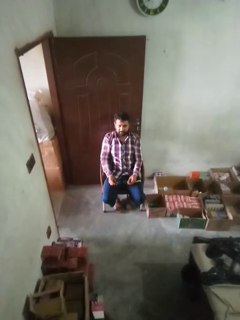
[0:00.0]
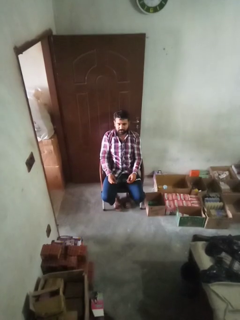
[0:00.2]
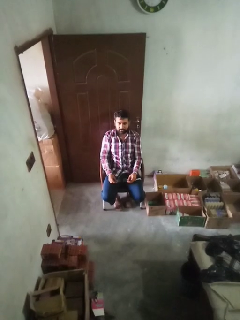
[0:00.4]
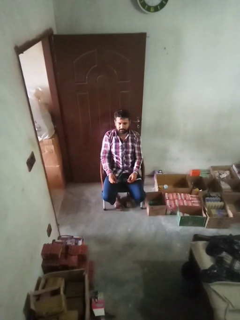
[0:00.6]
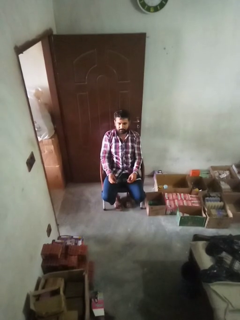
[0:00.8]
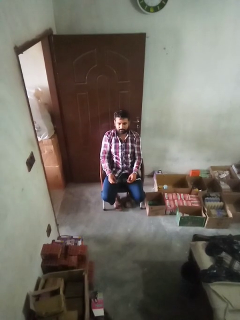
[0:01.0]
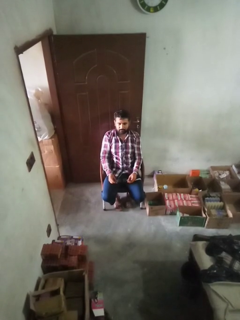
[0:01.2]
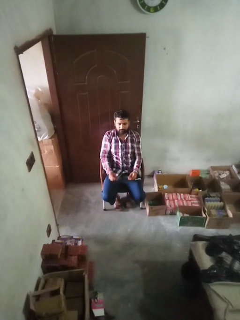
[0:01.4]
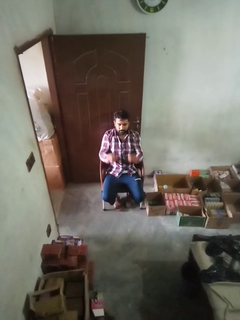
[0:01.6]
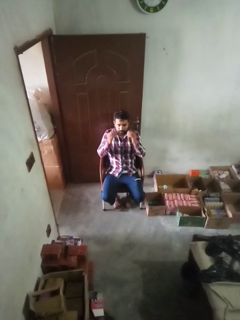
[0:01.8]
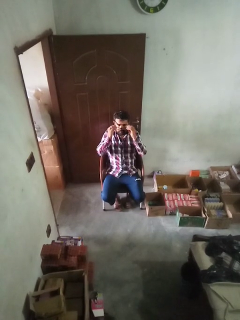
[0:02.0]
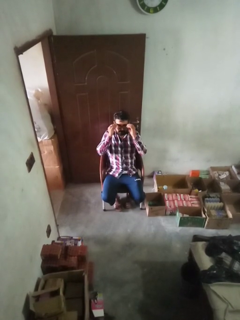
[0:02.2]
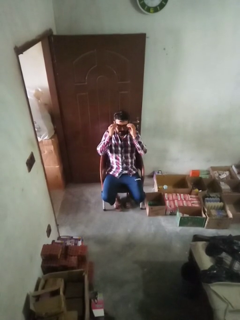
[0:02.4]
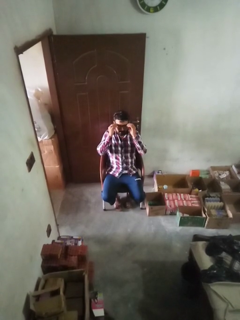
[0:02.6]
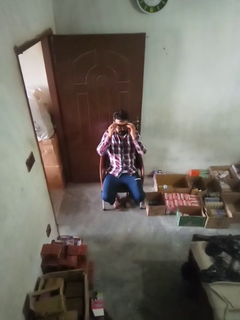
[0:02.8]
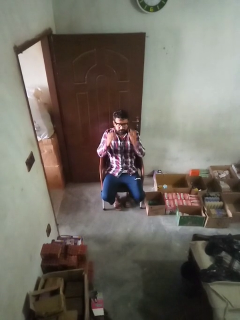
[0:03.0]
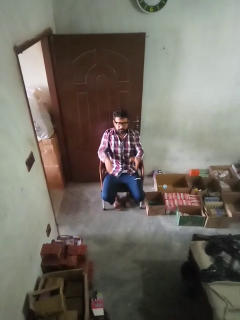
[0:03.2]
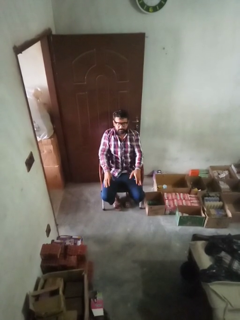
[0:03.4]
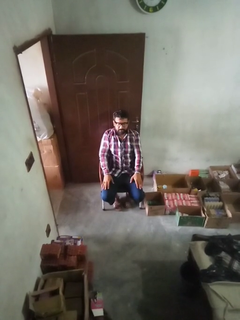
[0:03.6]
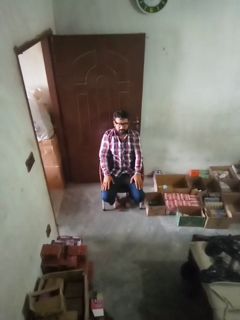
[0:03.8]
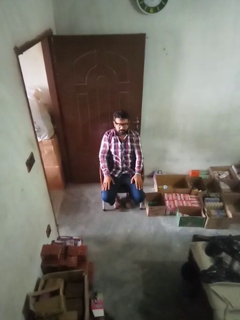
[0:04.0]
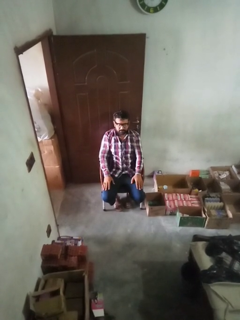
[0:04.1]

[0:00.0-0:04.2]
person puts on glasses

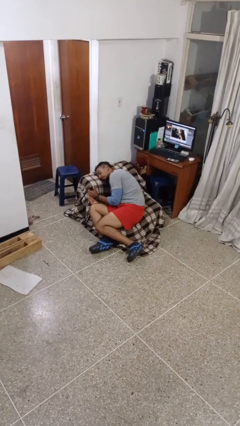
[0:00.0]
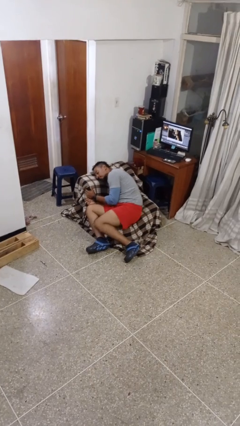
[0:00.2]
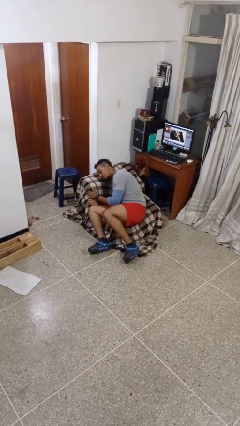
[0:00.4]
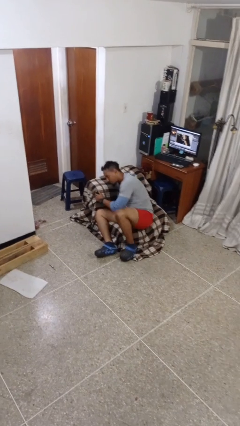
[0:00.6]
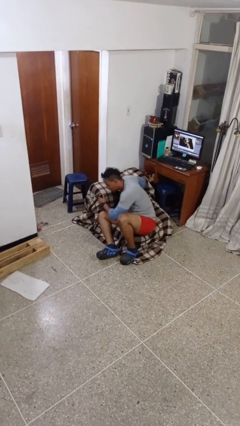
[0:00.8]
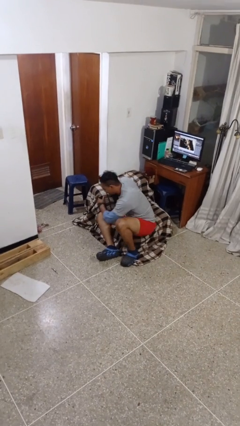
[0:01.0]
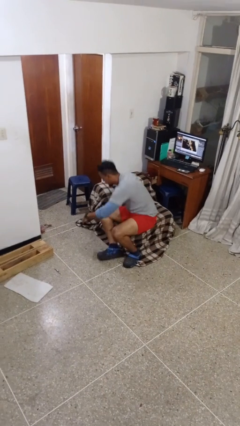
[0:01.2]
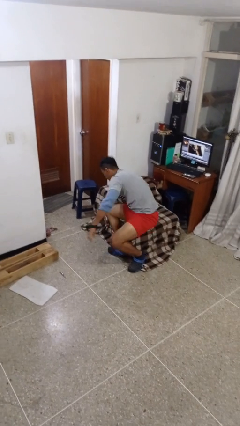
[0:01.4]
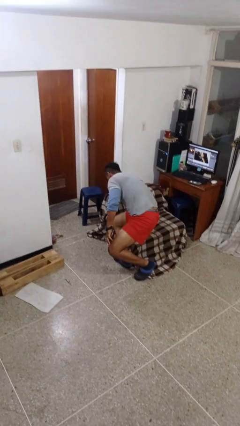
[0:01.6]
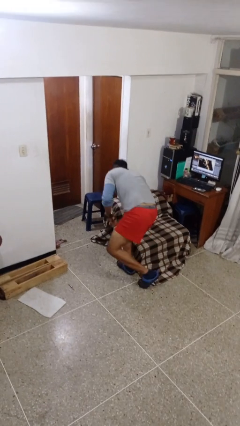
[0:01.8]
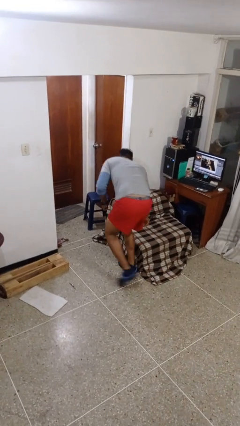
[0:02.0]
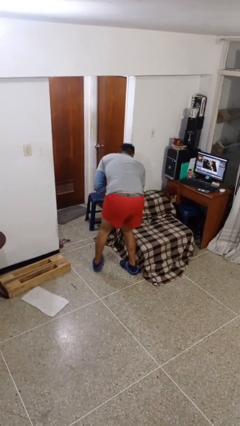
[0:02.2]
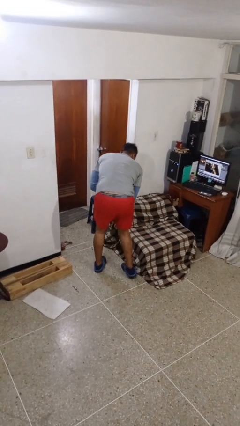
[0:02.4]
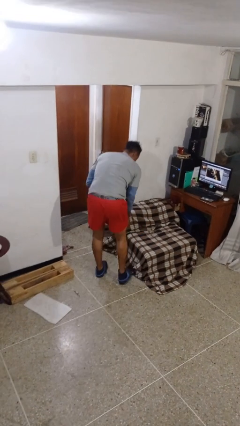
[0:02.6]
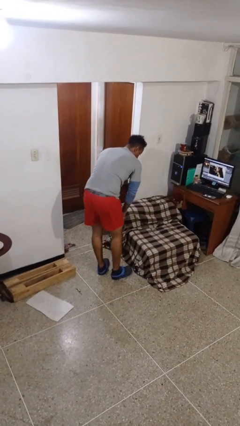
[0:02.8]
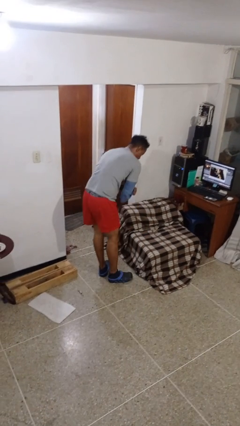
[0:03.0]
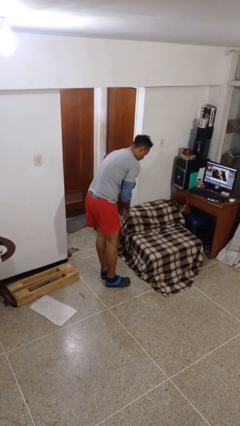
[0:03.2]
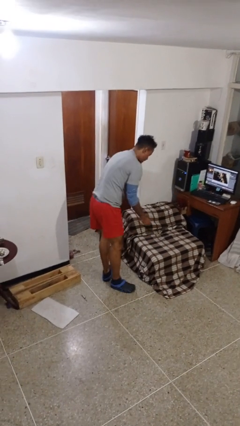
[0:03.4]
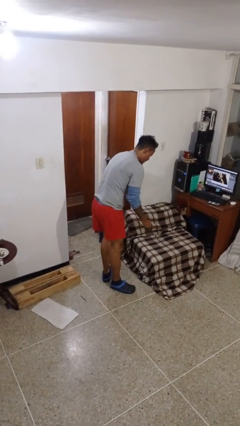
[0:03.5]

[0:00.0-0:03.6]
person stands up

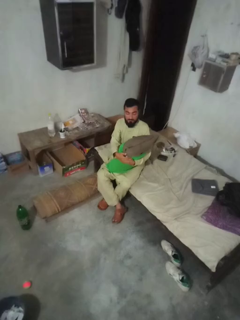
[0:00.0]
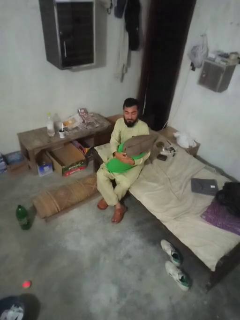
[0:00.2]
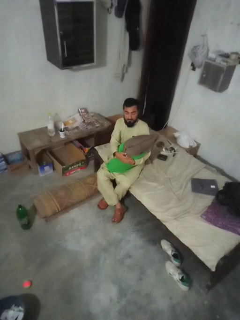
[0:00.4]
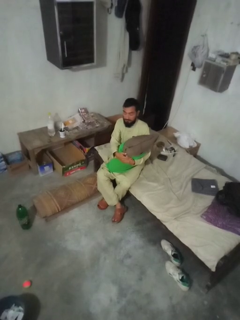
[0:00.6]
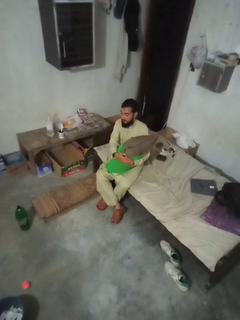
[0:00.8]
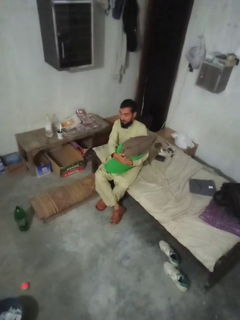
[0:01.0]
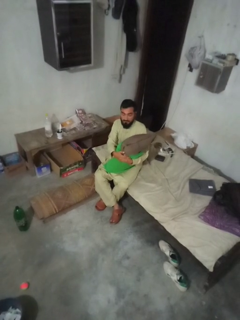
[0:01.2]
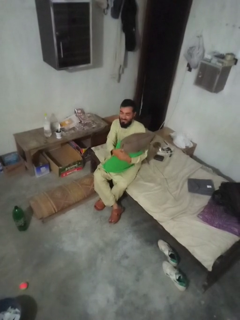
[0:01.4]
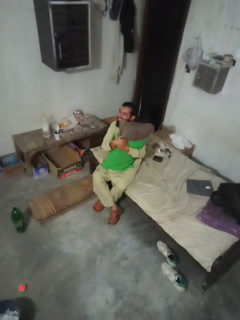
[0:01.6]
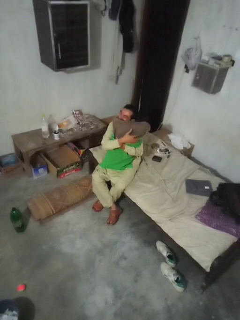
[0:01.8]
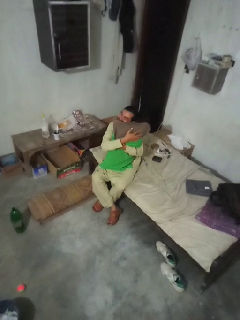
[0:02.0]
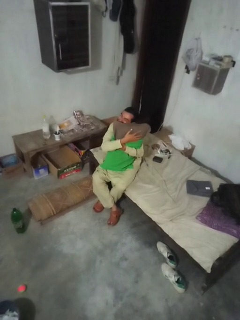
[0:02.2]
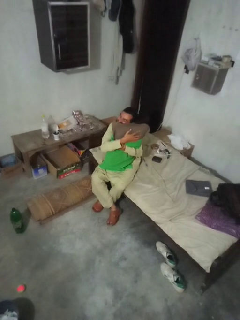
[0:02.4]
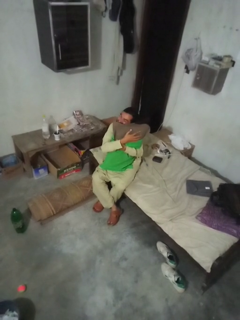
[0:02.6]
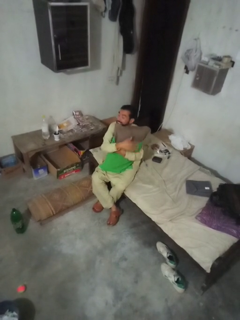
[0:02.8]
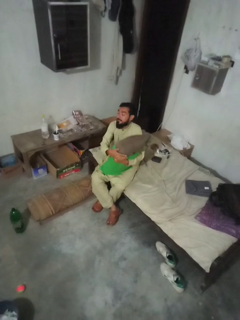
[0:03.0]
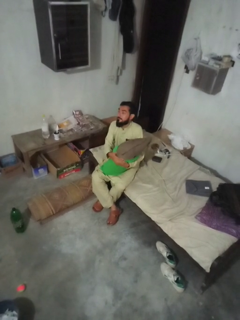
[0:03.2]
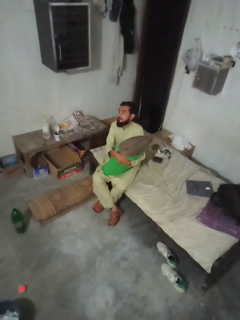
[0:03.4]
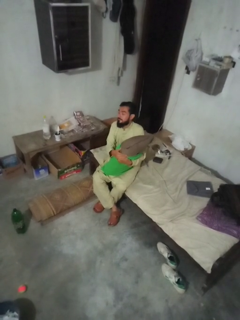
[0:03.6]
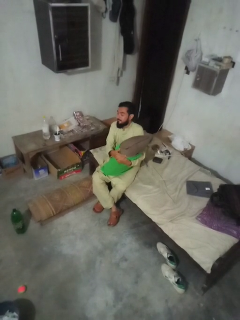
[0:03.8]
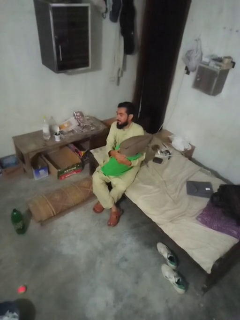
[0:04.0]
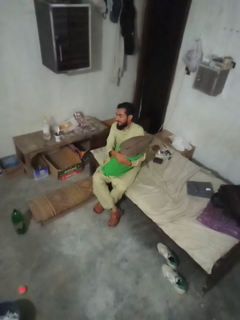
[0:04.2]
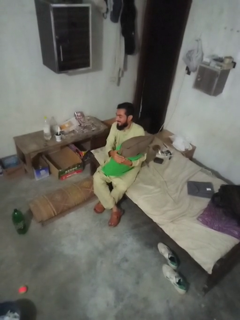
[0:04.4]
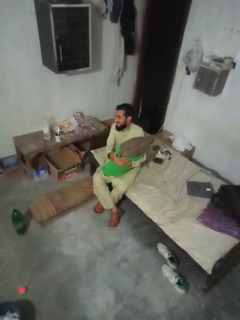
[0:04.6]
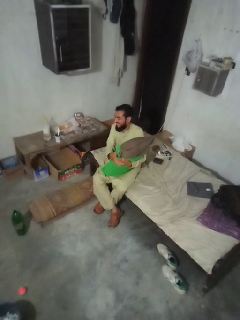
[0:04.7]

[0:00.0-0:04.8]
person hugs stuffed animal

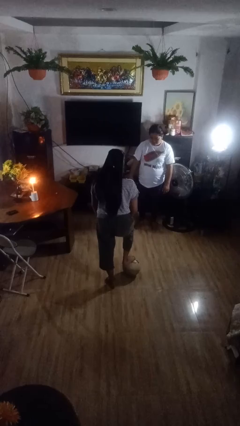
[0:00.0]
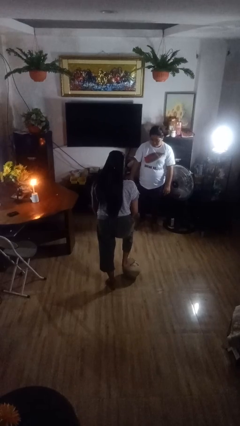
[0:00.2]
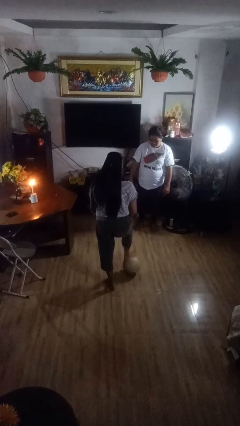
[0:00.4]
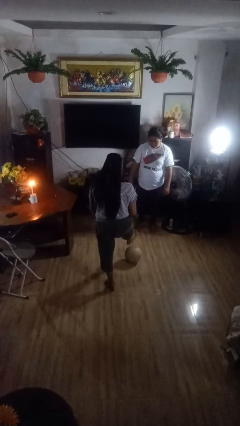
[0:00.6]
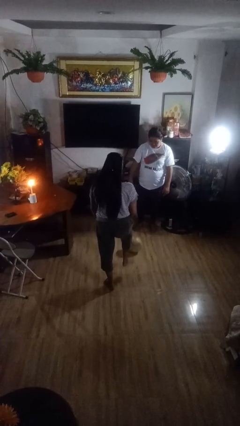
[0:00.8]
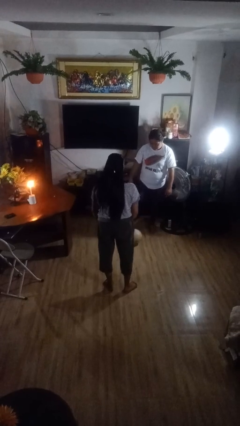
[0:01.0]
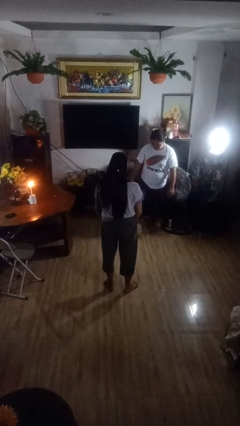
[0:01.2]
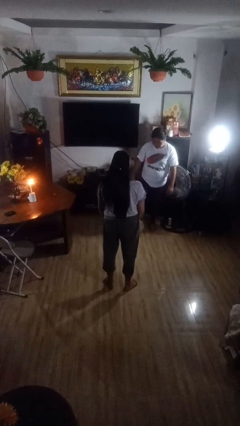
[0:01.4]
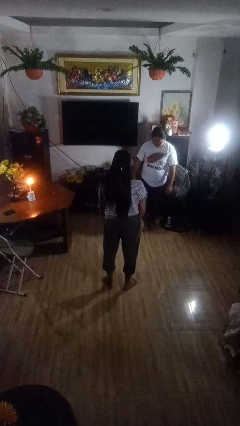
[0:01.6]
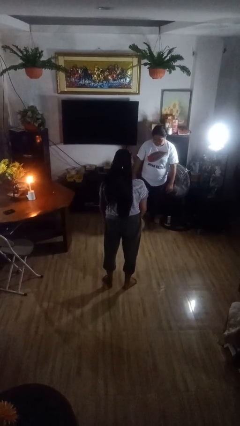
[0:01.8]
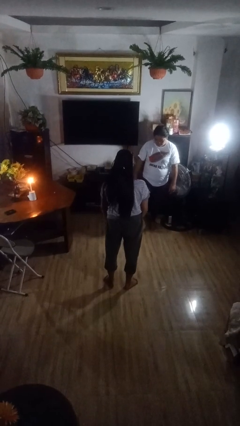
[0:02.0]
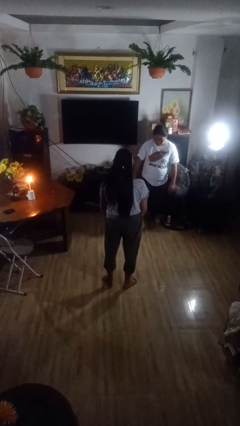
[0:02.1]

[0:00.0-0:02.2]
person kicks object to person

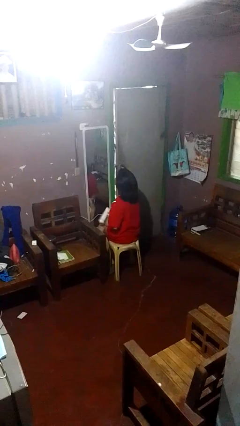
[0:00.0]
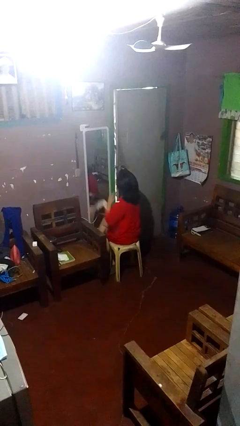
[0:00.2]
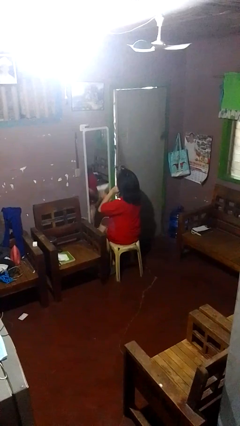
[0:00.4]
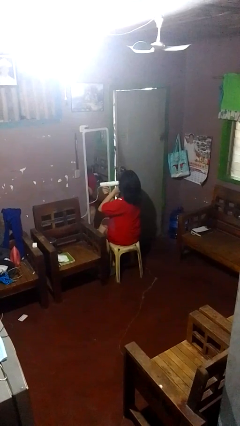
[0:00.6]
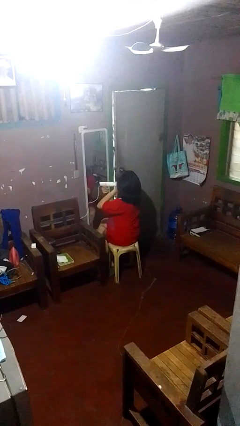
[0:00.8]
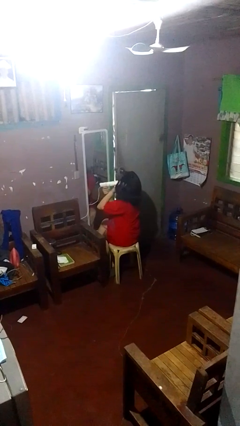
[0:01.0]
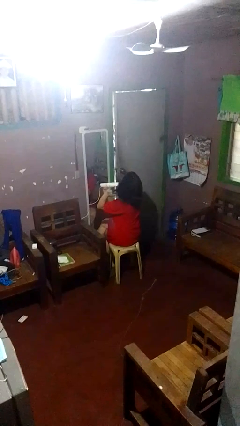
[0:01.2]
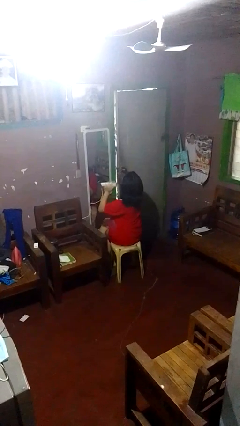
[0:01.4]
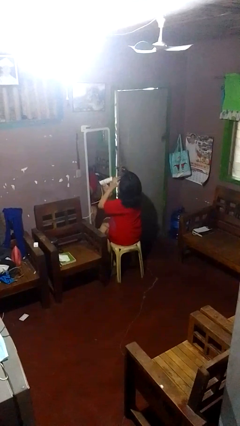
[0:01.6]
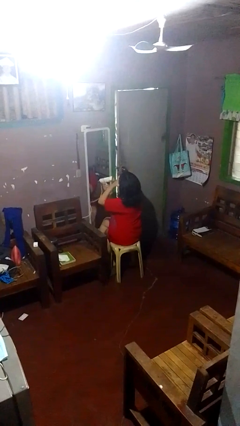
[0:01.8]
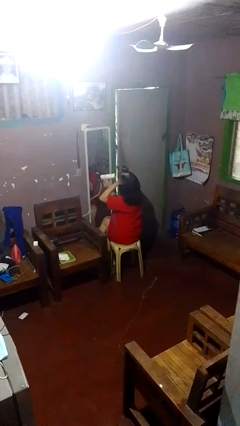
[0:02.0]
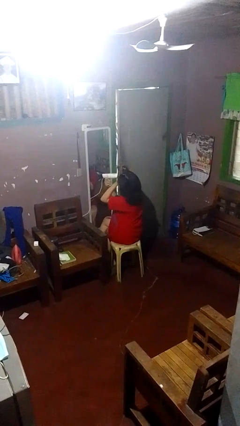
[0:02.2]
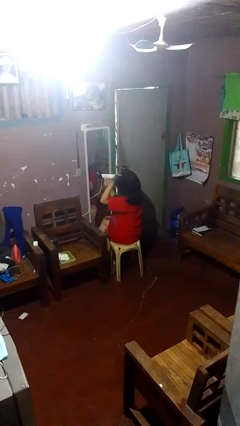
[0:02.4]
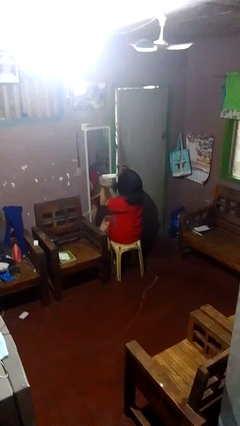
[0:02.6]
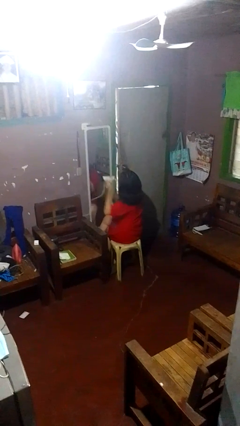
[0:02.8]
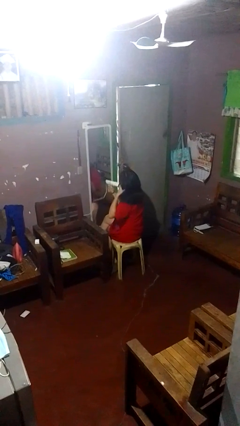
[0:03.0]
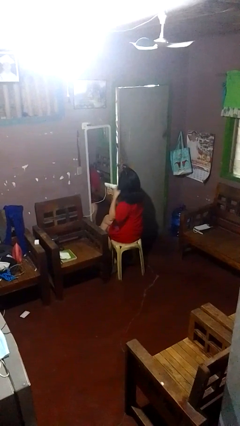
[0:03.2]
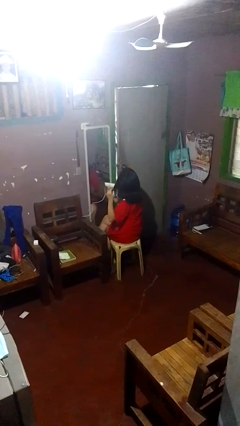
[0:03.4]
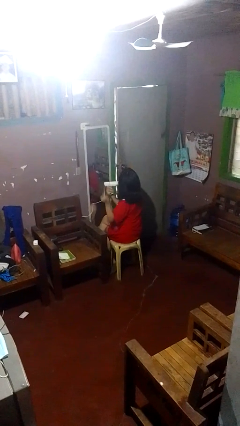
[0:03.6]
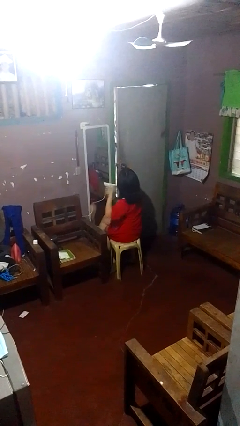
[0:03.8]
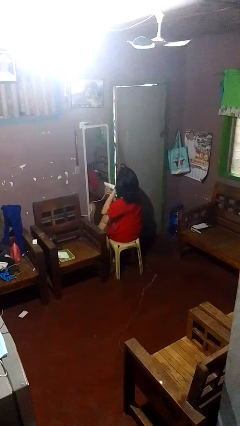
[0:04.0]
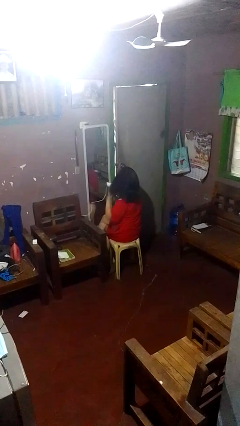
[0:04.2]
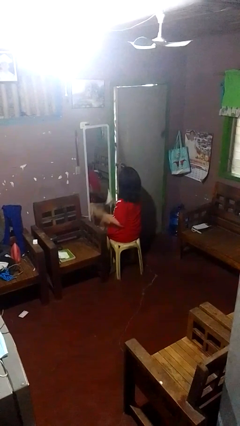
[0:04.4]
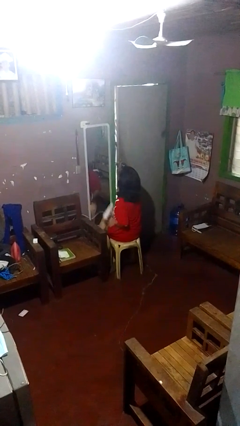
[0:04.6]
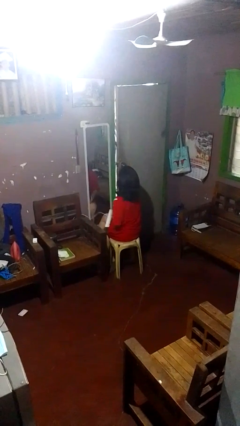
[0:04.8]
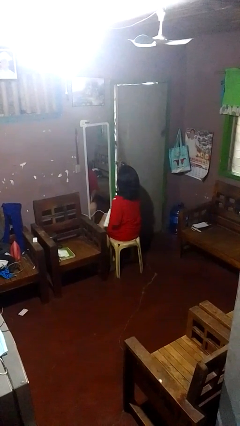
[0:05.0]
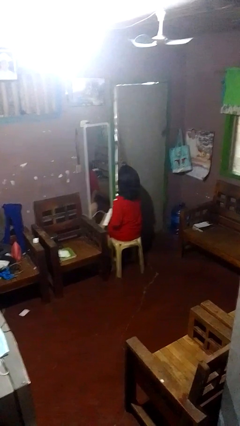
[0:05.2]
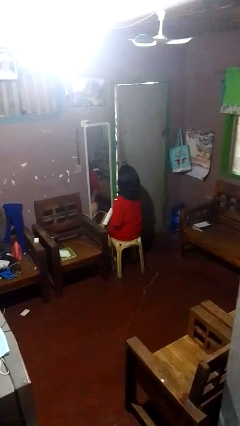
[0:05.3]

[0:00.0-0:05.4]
person dries hair with hairdryer
